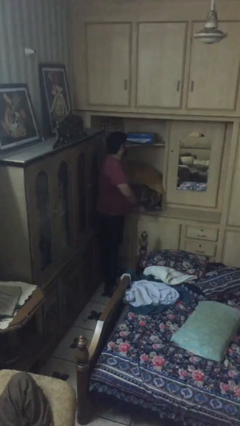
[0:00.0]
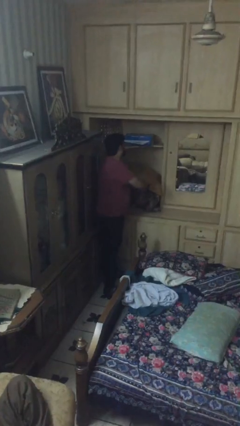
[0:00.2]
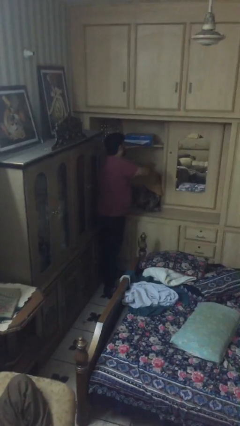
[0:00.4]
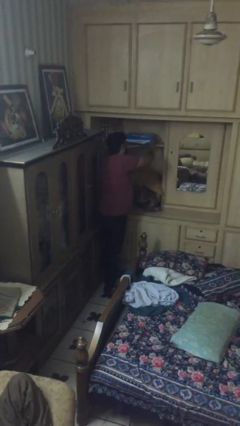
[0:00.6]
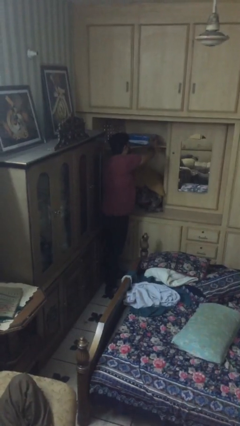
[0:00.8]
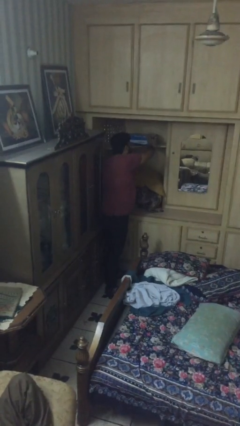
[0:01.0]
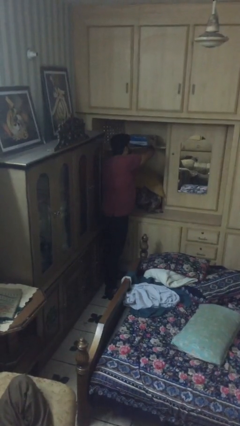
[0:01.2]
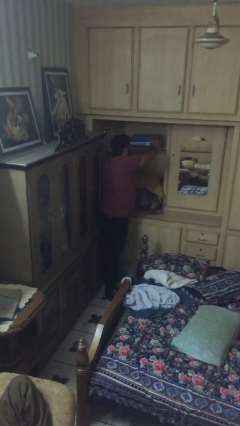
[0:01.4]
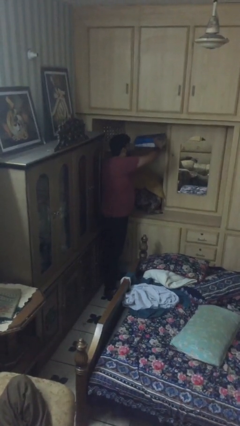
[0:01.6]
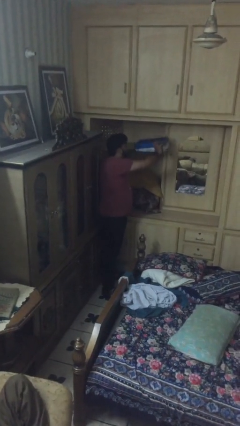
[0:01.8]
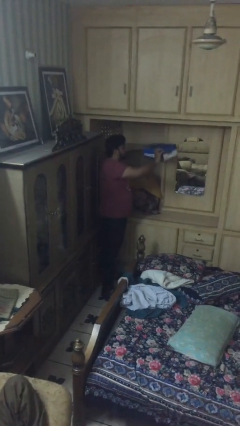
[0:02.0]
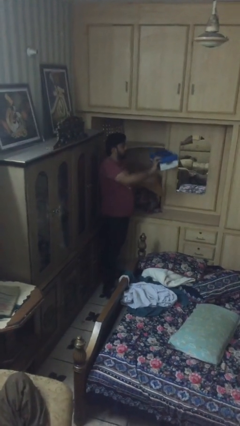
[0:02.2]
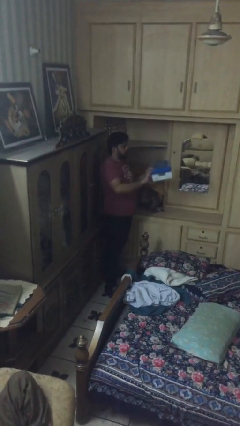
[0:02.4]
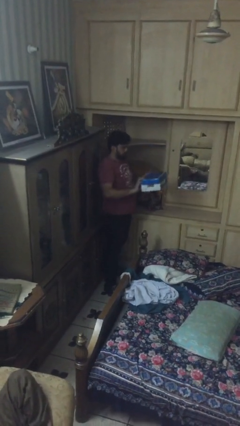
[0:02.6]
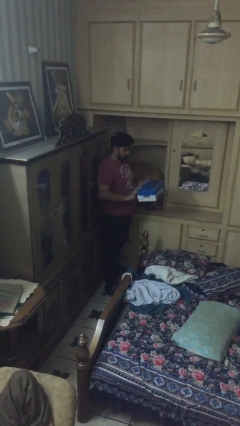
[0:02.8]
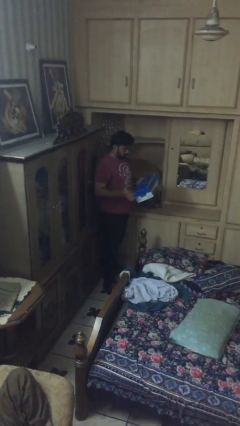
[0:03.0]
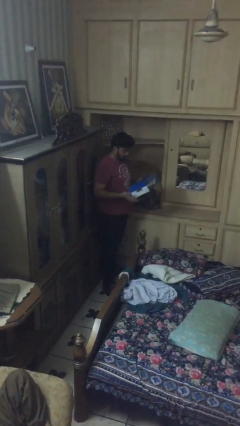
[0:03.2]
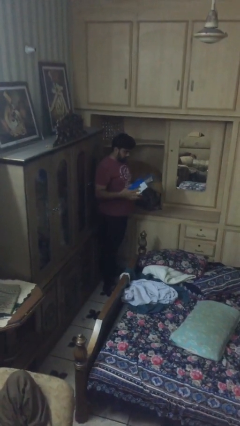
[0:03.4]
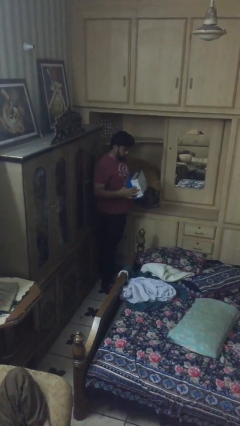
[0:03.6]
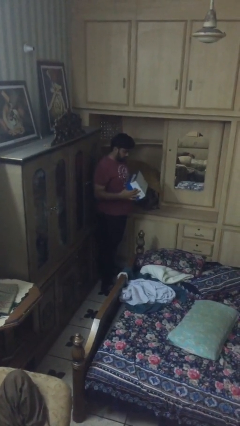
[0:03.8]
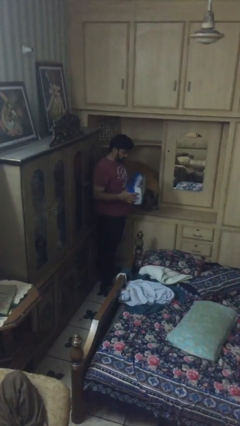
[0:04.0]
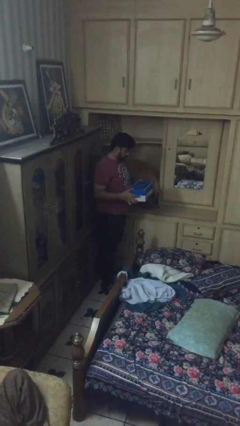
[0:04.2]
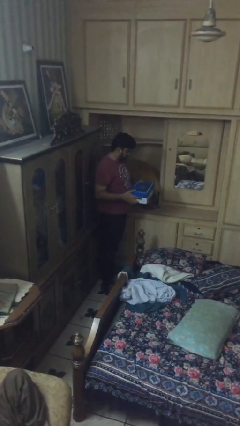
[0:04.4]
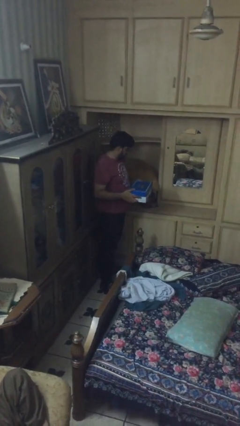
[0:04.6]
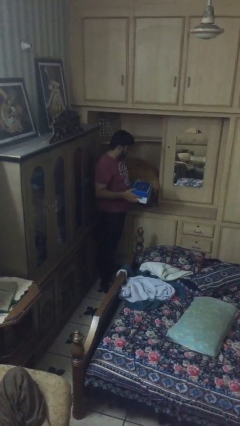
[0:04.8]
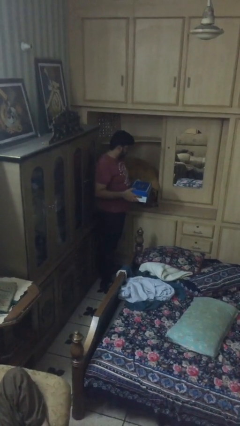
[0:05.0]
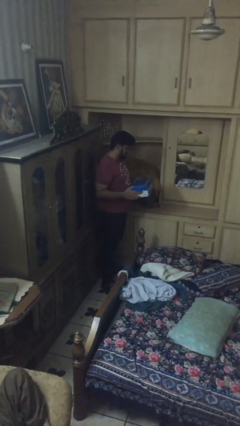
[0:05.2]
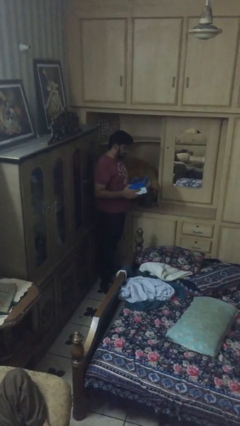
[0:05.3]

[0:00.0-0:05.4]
person picks up object from shelf

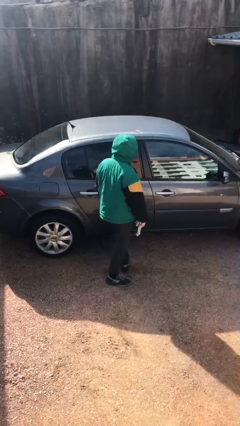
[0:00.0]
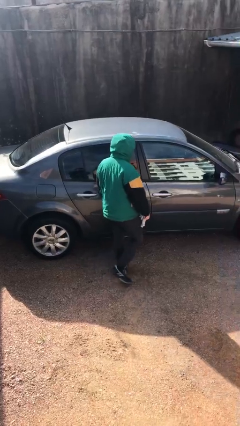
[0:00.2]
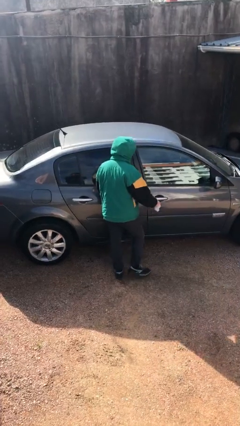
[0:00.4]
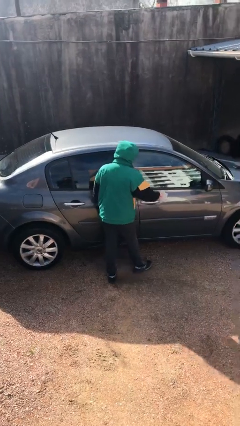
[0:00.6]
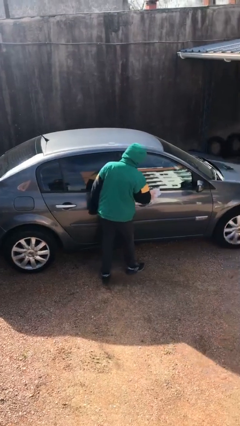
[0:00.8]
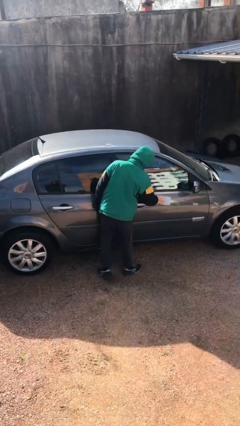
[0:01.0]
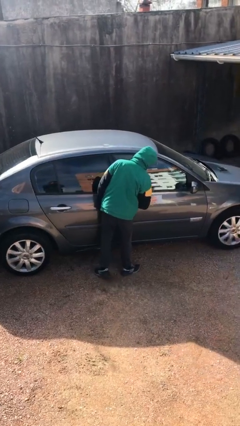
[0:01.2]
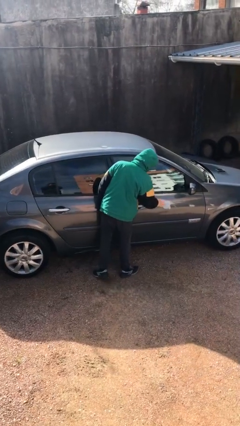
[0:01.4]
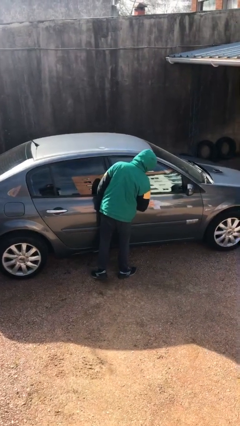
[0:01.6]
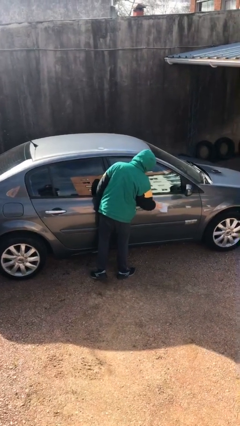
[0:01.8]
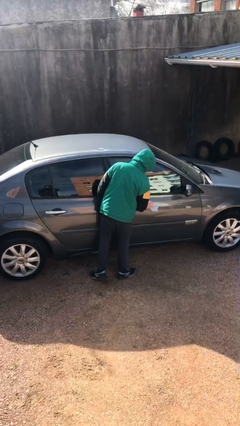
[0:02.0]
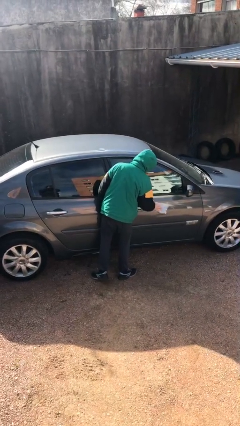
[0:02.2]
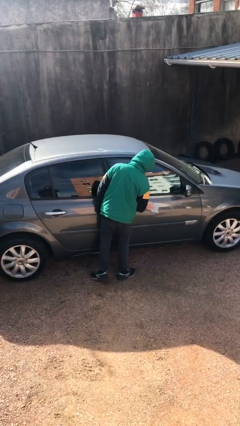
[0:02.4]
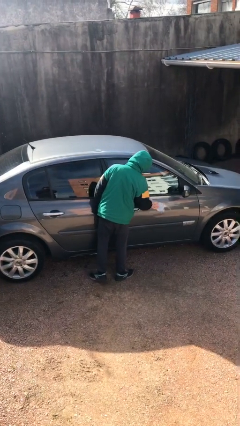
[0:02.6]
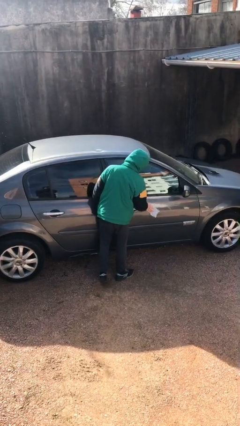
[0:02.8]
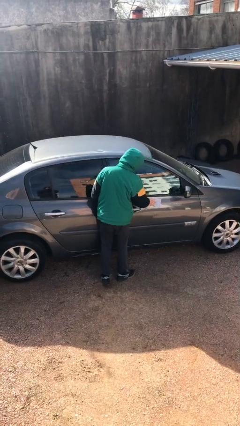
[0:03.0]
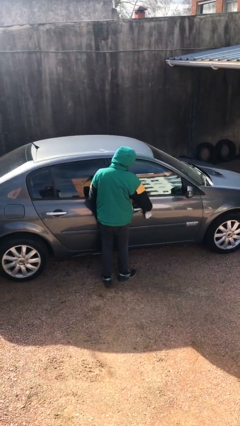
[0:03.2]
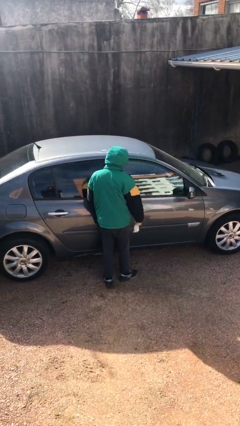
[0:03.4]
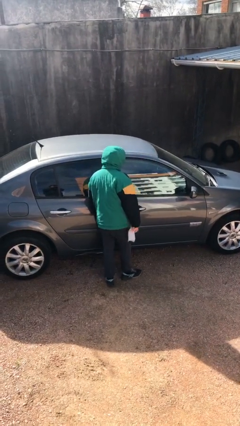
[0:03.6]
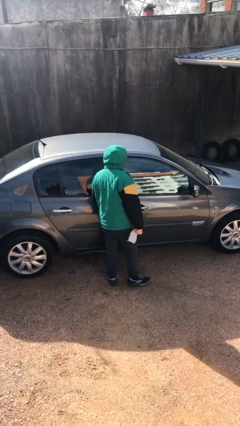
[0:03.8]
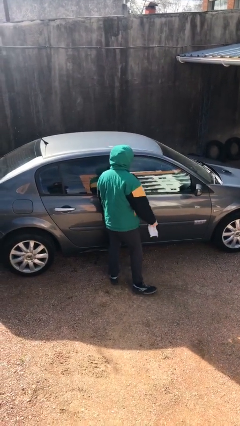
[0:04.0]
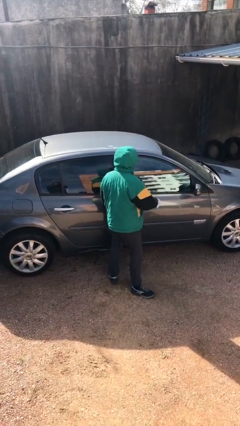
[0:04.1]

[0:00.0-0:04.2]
person polishes car with rag

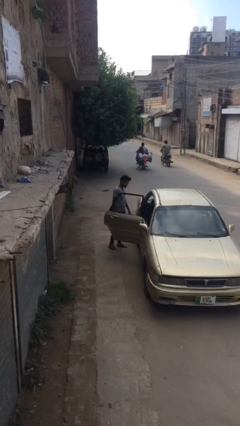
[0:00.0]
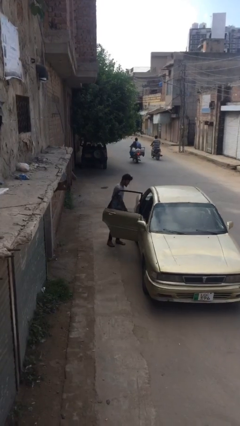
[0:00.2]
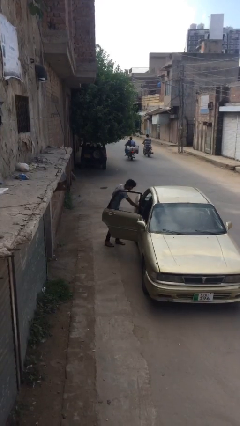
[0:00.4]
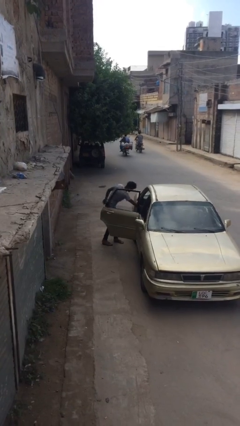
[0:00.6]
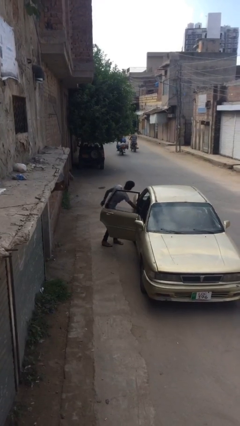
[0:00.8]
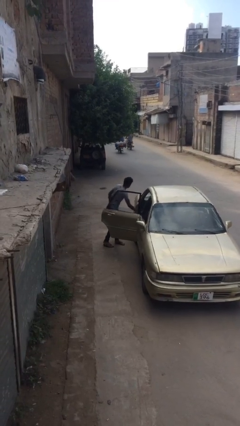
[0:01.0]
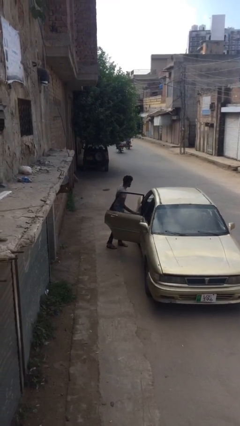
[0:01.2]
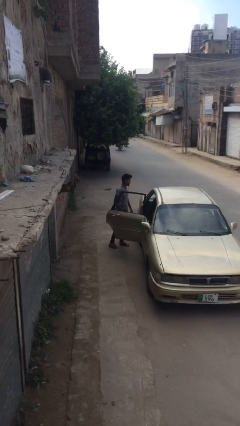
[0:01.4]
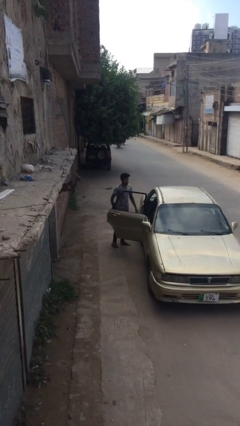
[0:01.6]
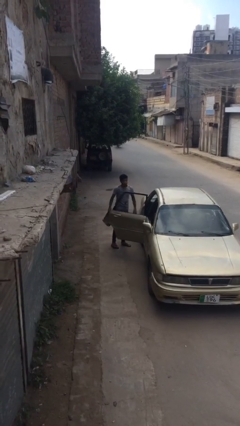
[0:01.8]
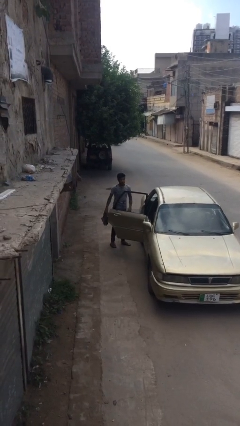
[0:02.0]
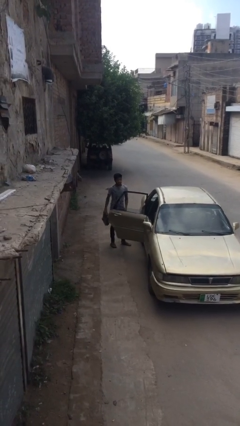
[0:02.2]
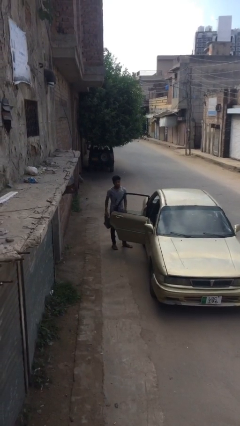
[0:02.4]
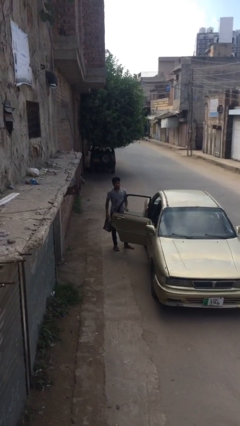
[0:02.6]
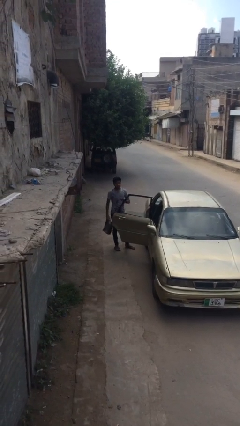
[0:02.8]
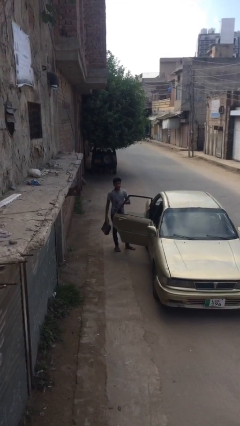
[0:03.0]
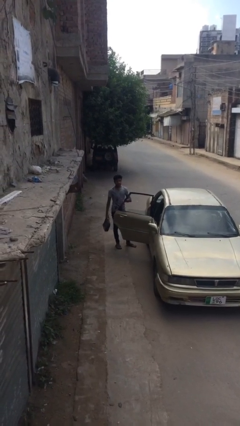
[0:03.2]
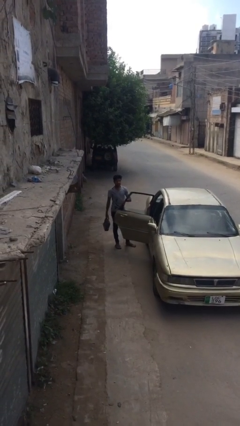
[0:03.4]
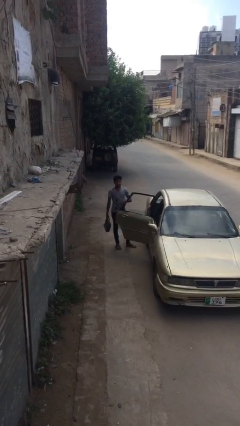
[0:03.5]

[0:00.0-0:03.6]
person unloads car

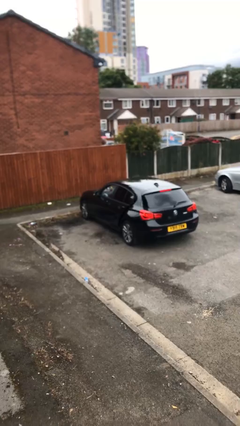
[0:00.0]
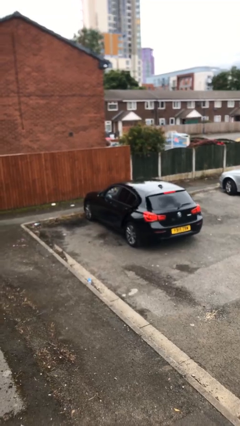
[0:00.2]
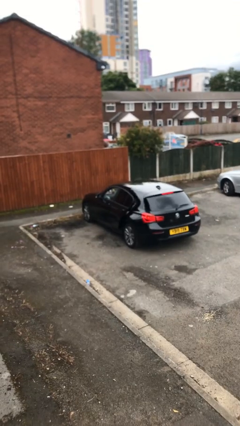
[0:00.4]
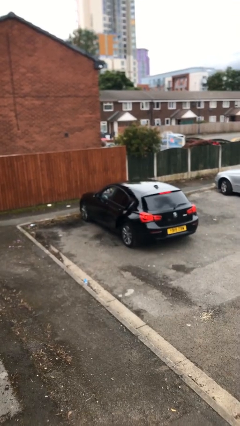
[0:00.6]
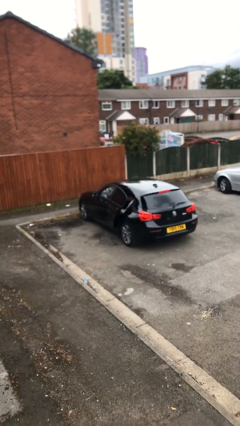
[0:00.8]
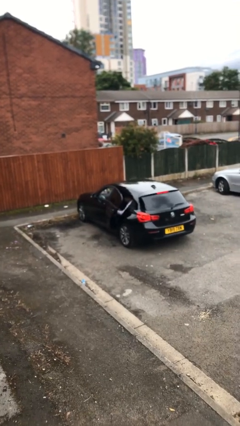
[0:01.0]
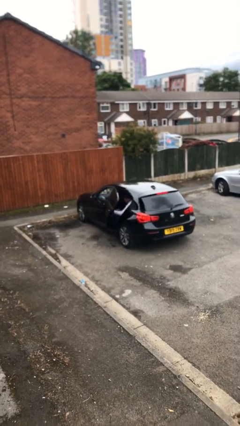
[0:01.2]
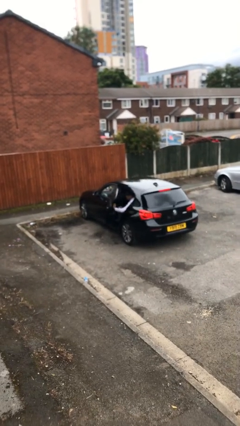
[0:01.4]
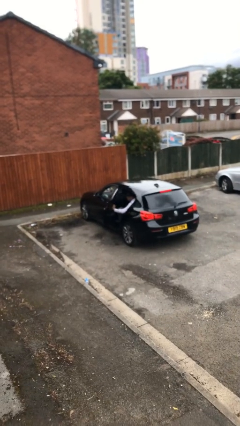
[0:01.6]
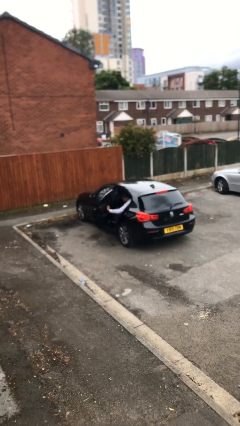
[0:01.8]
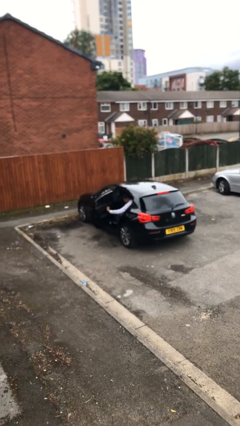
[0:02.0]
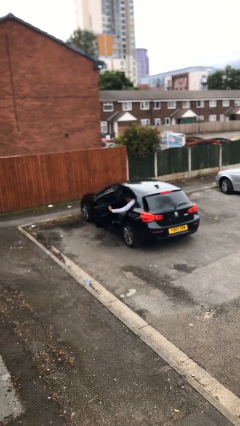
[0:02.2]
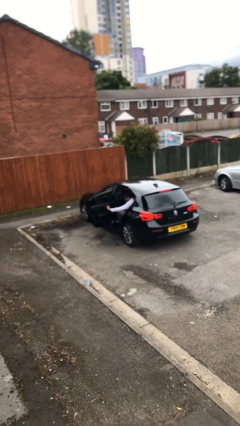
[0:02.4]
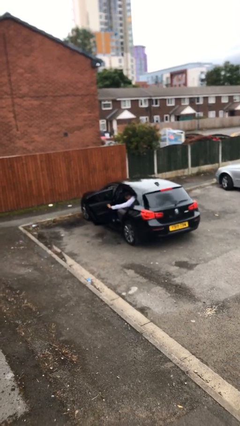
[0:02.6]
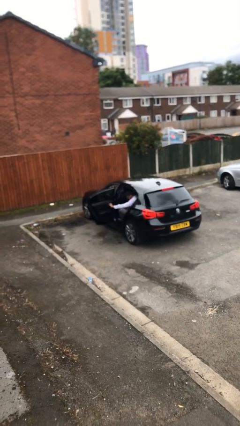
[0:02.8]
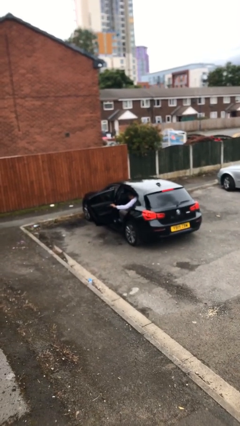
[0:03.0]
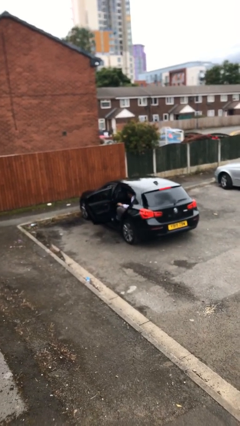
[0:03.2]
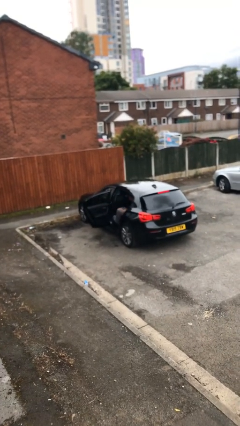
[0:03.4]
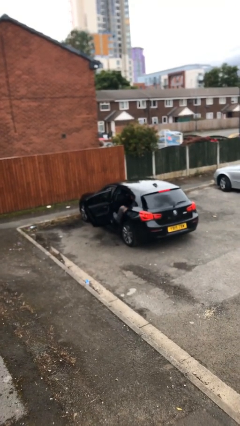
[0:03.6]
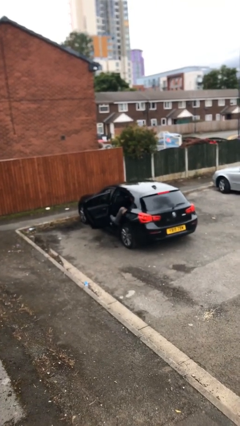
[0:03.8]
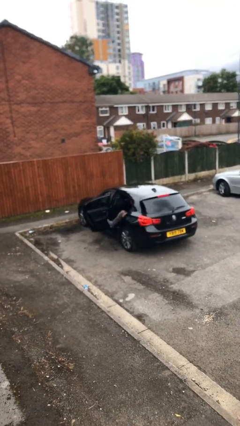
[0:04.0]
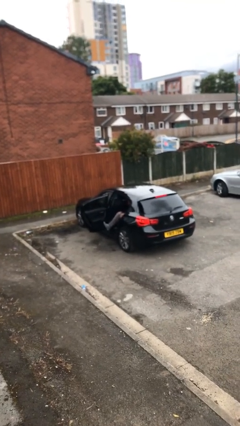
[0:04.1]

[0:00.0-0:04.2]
person opens car door

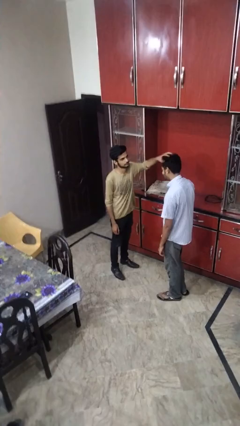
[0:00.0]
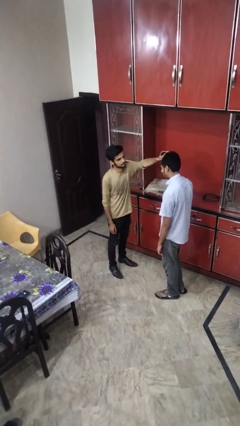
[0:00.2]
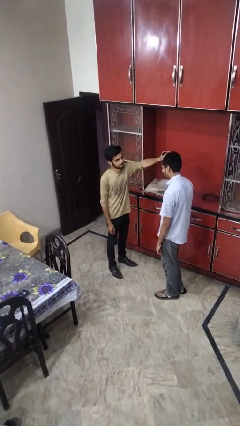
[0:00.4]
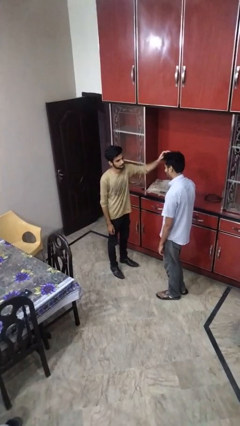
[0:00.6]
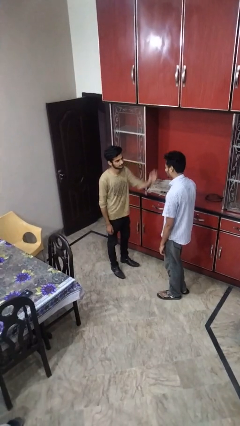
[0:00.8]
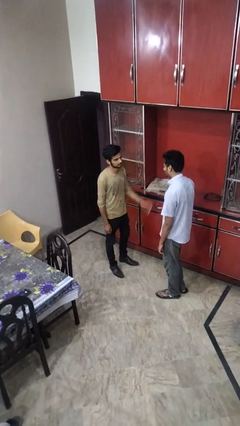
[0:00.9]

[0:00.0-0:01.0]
person grabs person by hair
